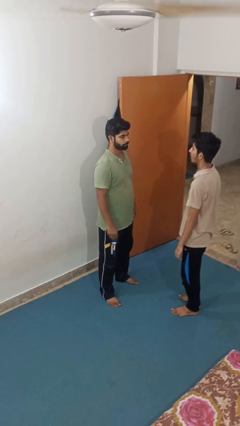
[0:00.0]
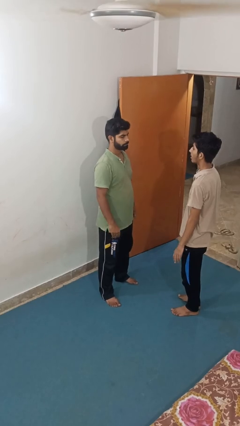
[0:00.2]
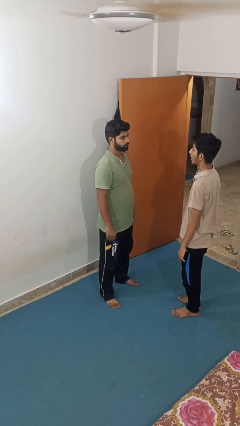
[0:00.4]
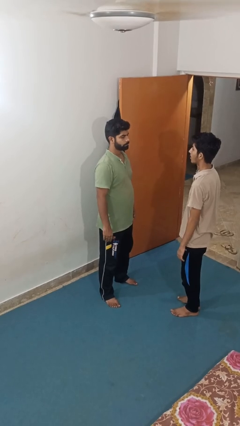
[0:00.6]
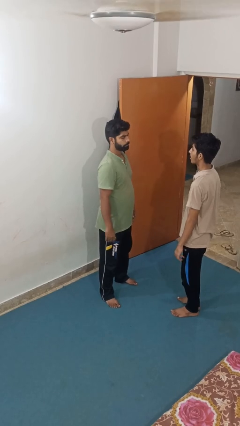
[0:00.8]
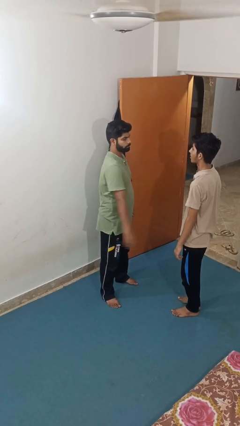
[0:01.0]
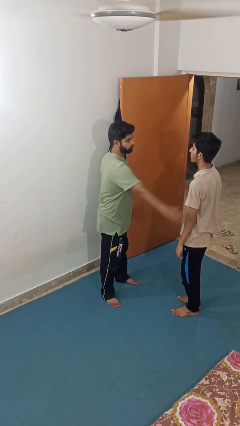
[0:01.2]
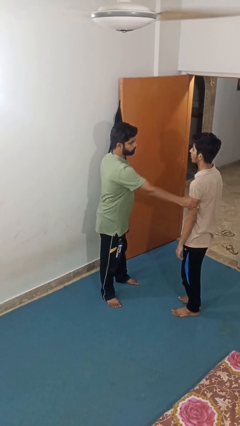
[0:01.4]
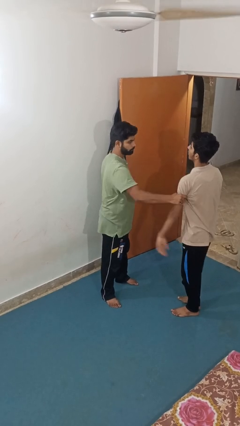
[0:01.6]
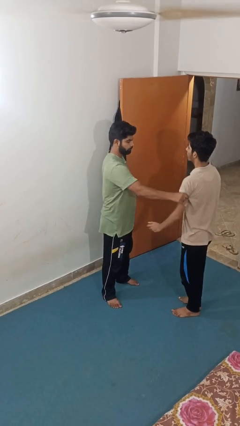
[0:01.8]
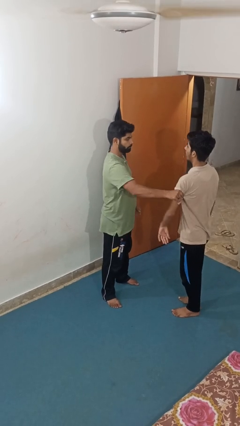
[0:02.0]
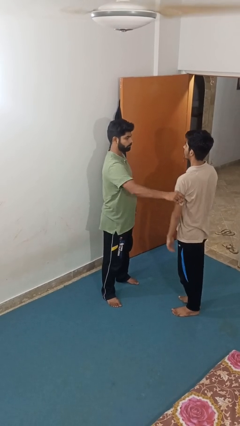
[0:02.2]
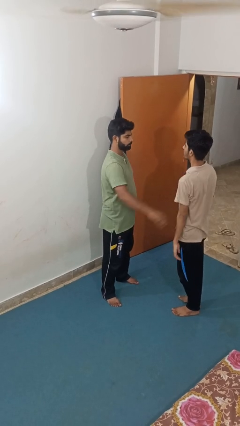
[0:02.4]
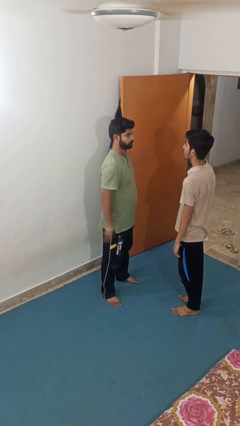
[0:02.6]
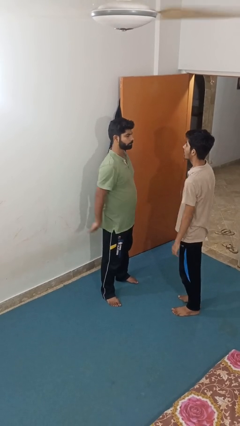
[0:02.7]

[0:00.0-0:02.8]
person grabs person by bicep

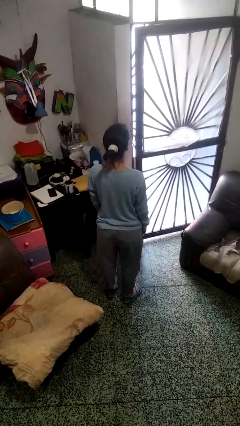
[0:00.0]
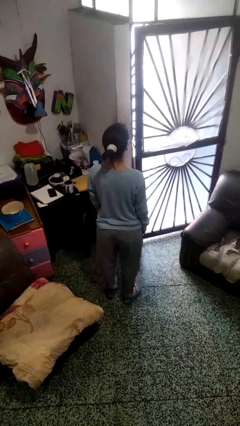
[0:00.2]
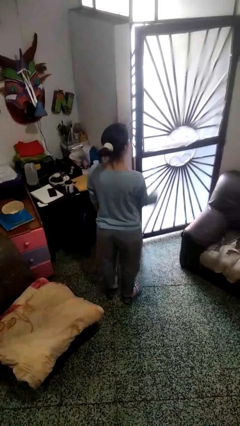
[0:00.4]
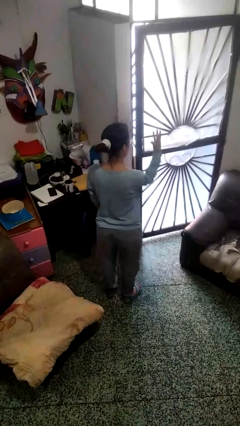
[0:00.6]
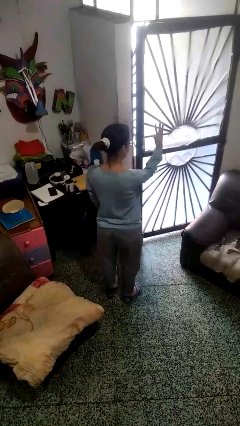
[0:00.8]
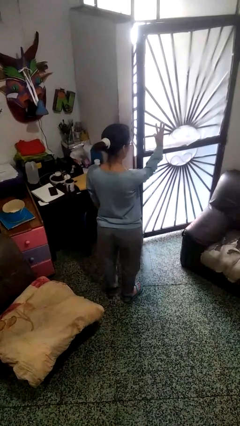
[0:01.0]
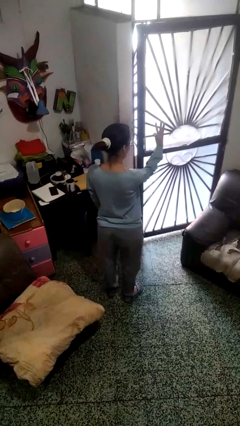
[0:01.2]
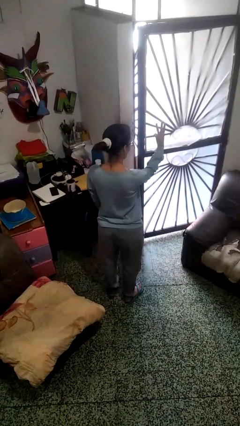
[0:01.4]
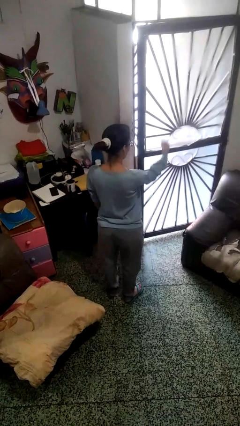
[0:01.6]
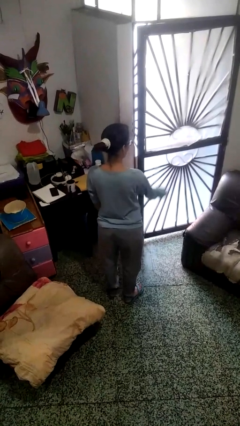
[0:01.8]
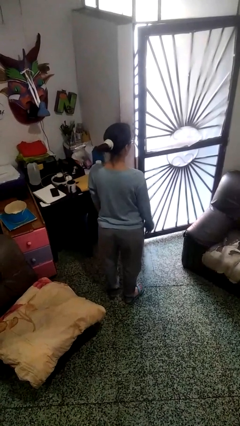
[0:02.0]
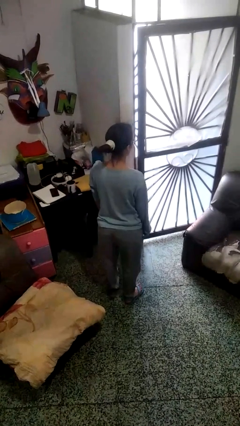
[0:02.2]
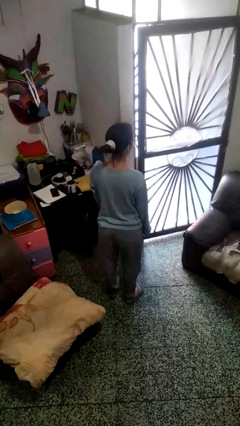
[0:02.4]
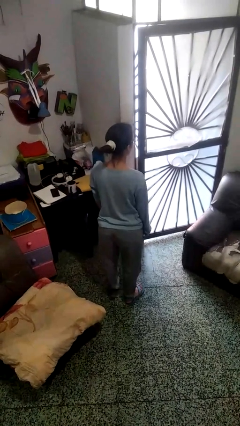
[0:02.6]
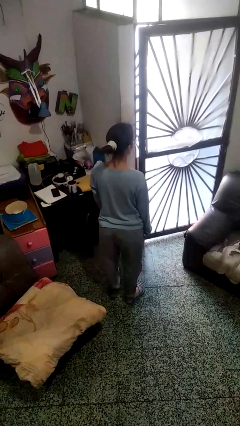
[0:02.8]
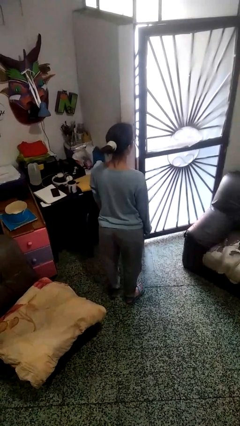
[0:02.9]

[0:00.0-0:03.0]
person gestures number three

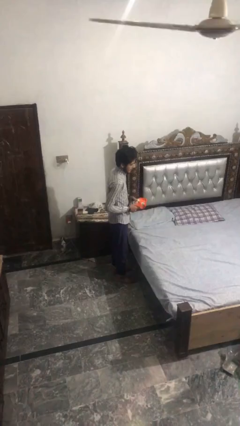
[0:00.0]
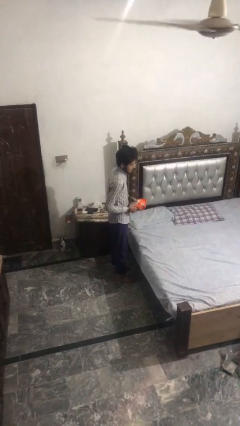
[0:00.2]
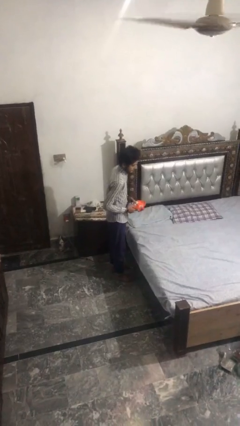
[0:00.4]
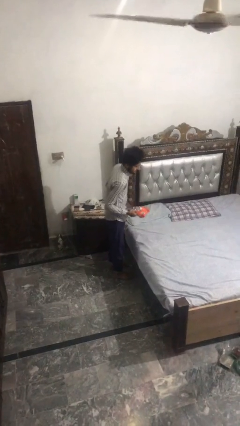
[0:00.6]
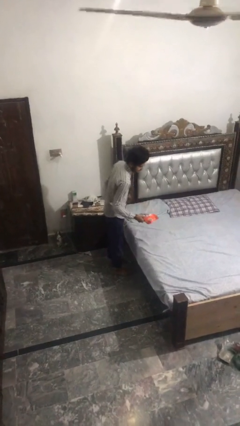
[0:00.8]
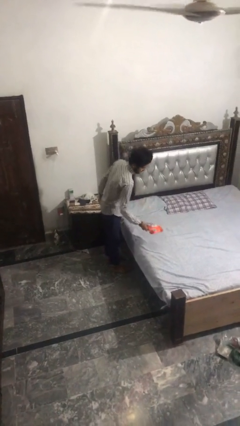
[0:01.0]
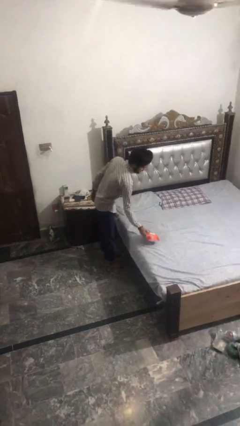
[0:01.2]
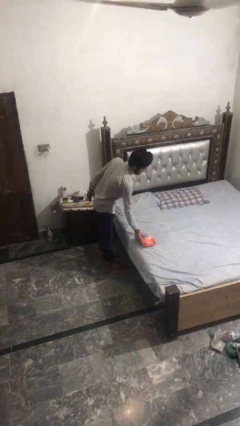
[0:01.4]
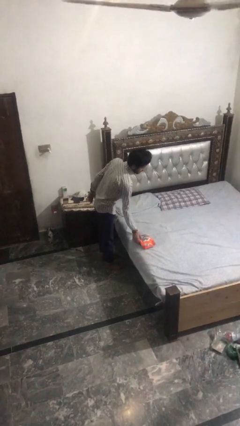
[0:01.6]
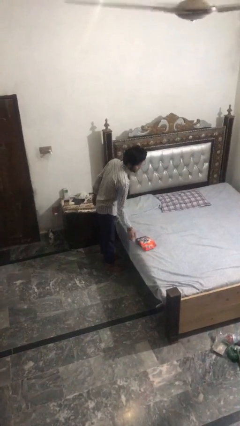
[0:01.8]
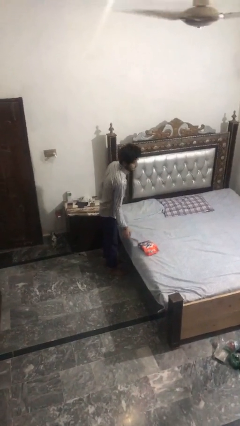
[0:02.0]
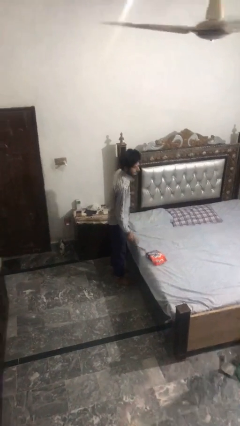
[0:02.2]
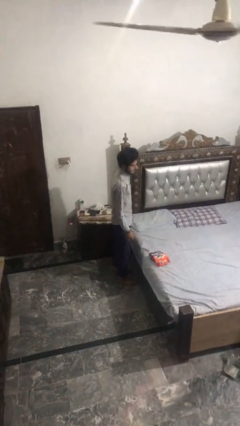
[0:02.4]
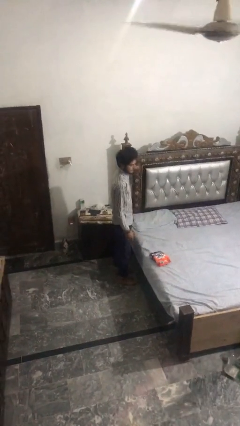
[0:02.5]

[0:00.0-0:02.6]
person puts down object on bed

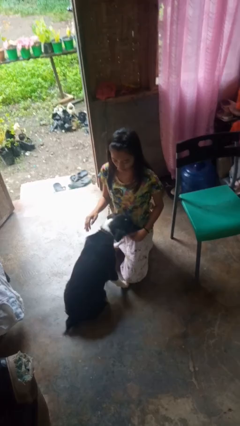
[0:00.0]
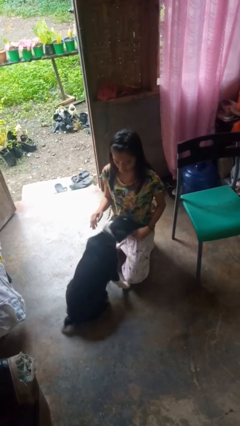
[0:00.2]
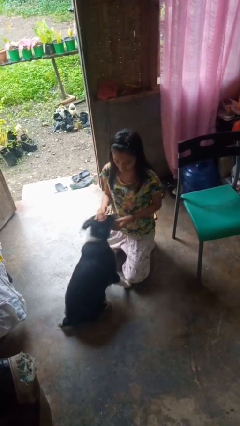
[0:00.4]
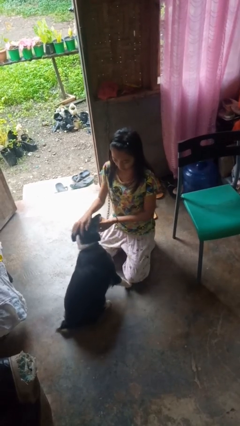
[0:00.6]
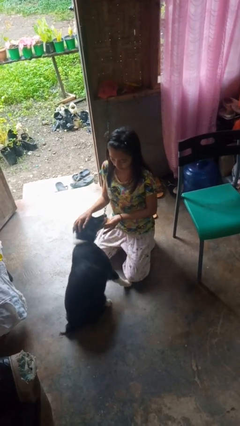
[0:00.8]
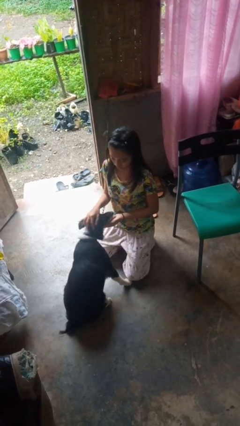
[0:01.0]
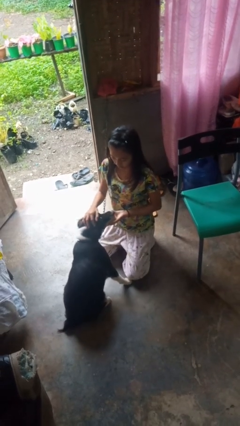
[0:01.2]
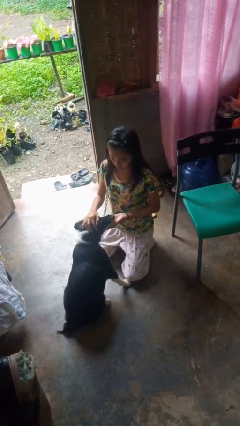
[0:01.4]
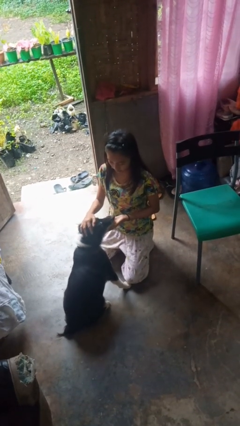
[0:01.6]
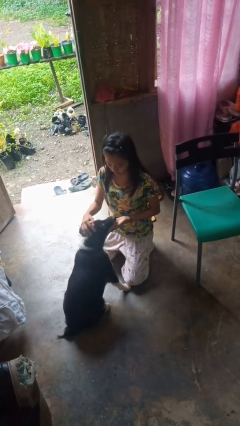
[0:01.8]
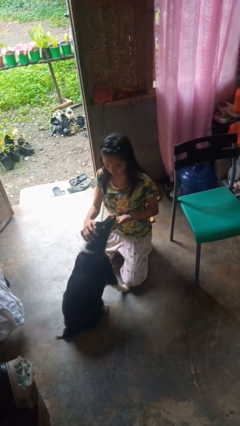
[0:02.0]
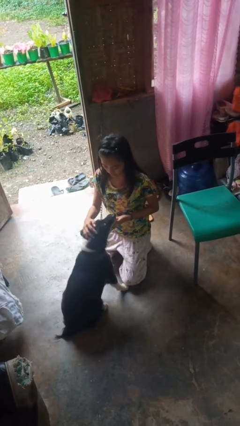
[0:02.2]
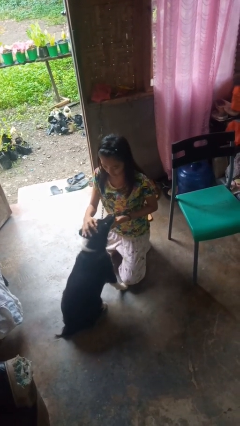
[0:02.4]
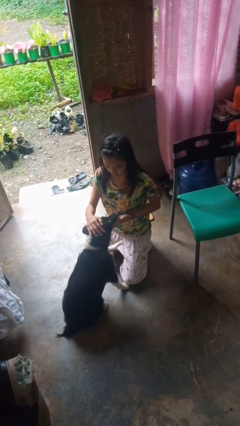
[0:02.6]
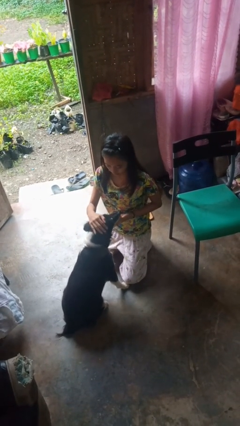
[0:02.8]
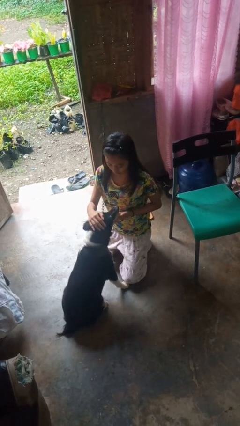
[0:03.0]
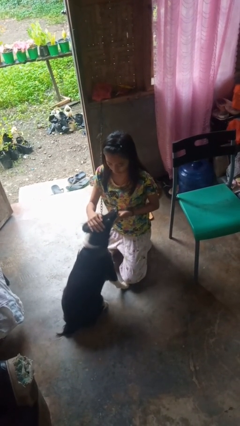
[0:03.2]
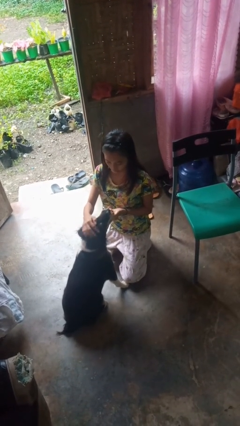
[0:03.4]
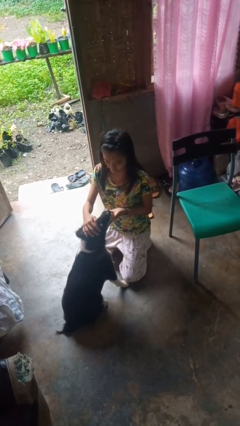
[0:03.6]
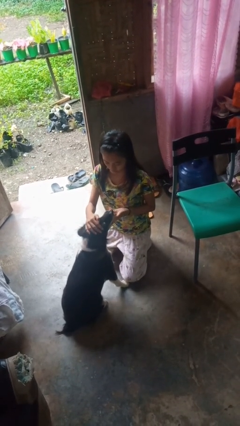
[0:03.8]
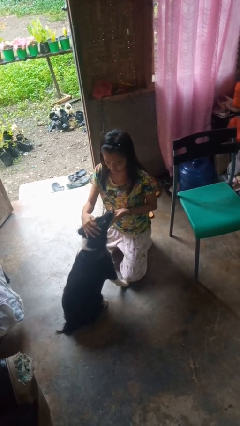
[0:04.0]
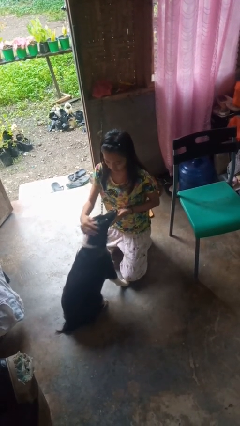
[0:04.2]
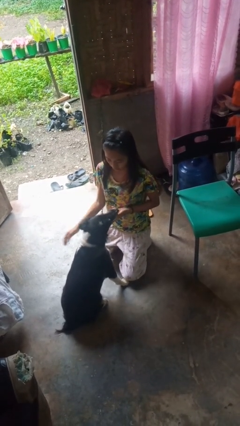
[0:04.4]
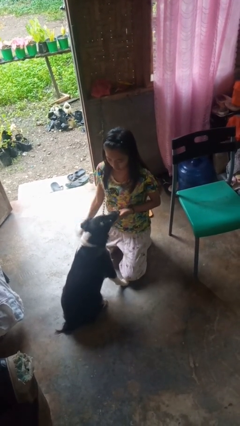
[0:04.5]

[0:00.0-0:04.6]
person pets dog

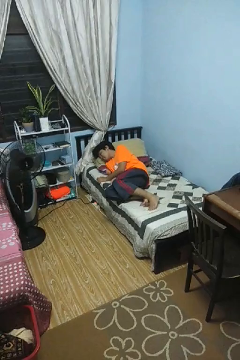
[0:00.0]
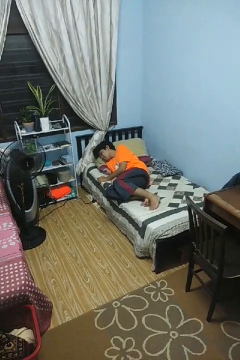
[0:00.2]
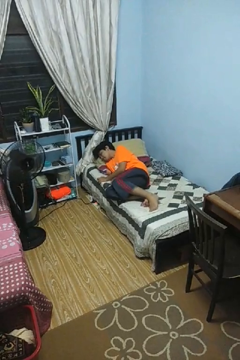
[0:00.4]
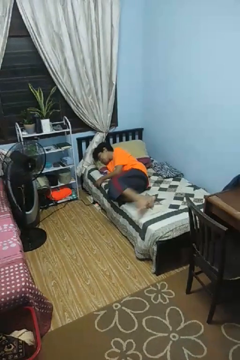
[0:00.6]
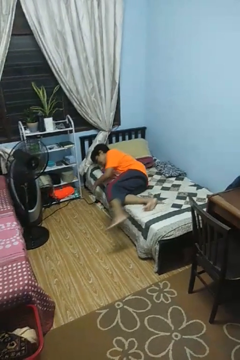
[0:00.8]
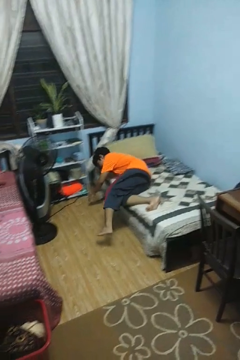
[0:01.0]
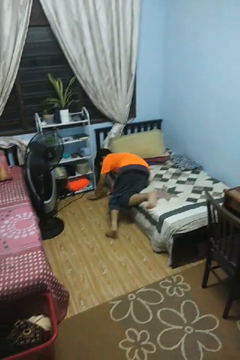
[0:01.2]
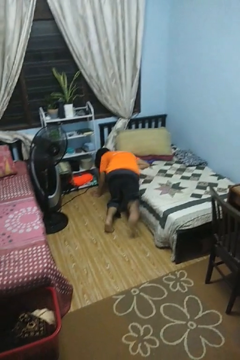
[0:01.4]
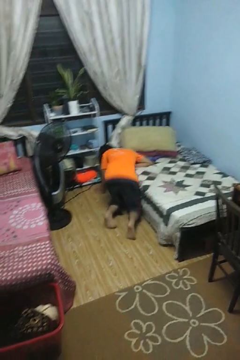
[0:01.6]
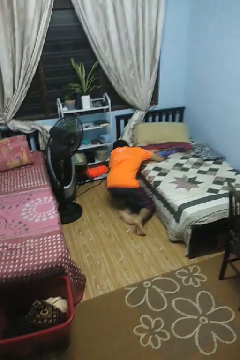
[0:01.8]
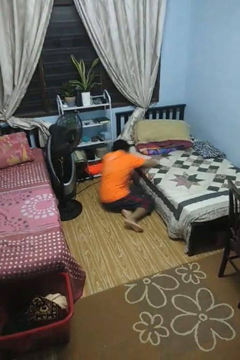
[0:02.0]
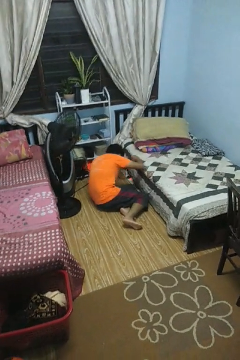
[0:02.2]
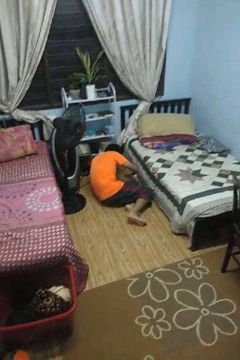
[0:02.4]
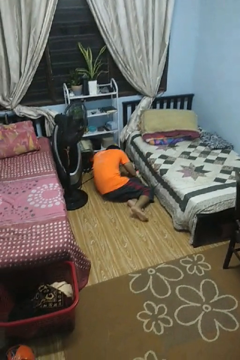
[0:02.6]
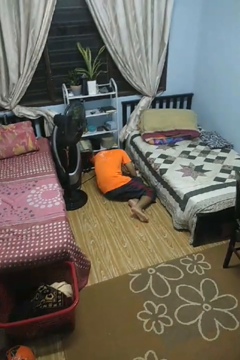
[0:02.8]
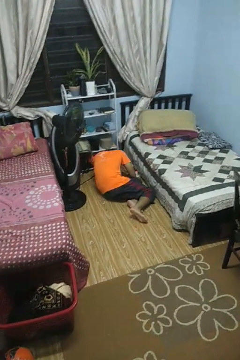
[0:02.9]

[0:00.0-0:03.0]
person falls from bed

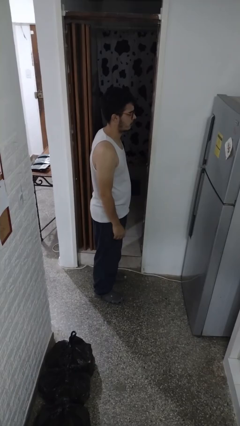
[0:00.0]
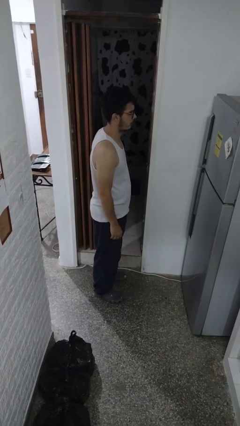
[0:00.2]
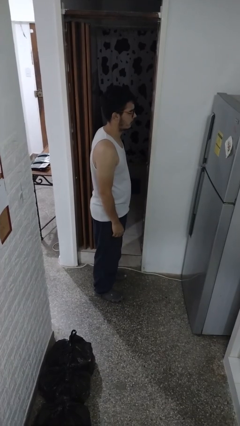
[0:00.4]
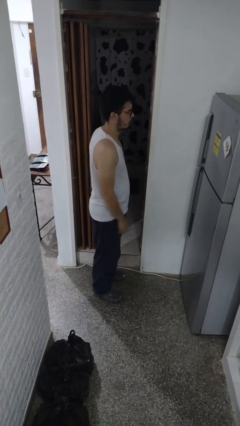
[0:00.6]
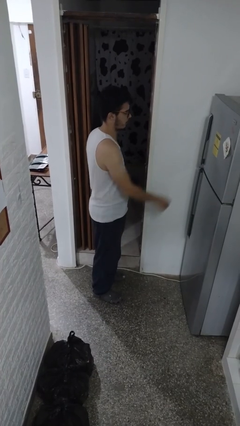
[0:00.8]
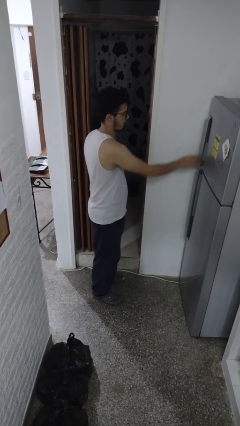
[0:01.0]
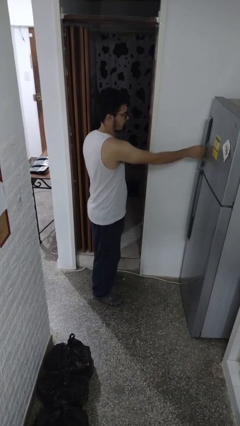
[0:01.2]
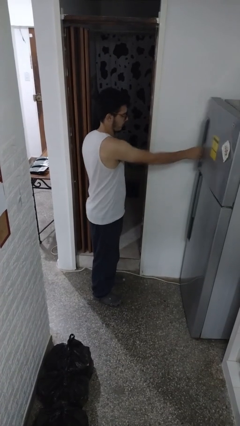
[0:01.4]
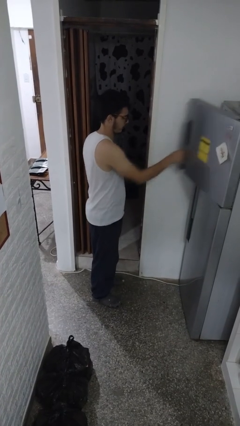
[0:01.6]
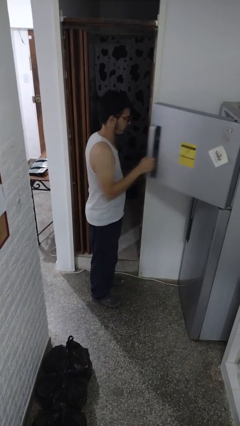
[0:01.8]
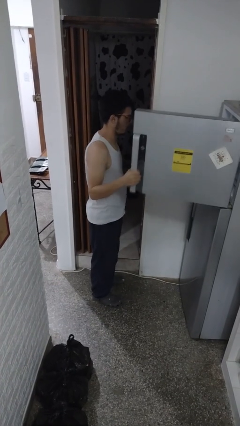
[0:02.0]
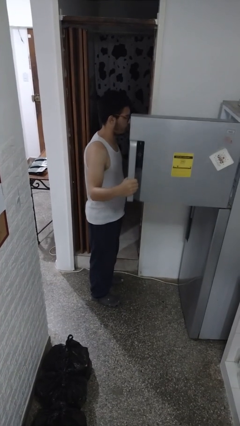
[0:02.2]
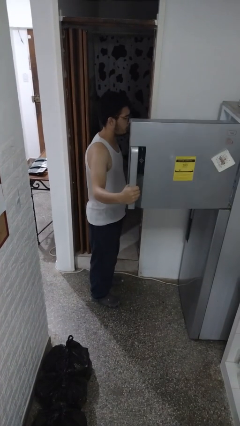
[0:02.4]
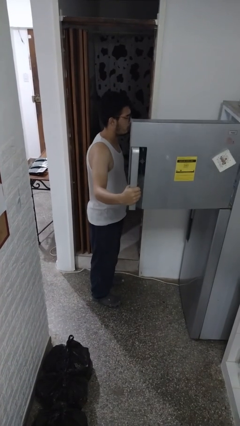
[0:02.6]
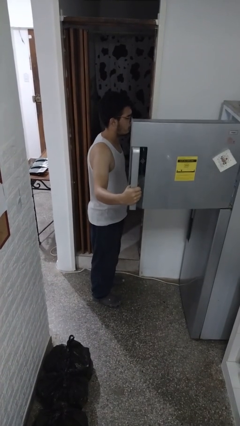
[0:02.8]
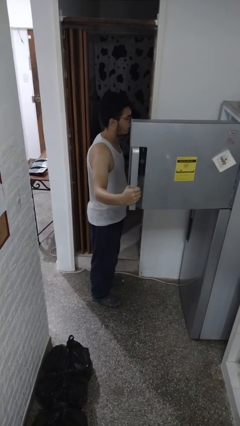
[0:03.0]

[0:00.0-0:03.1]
person opens refrigerator
